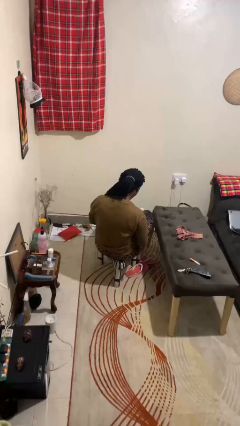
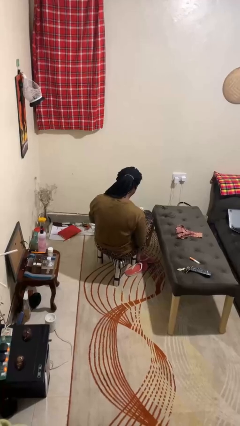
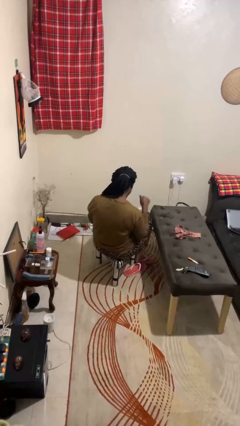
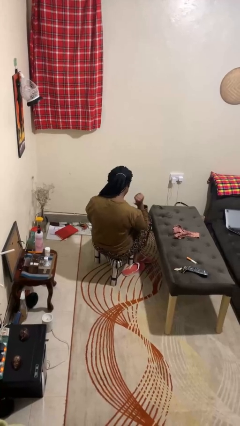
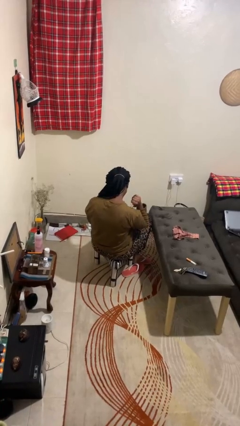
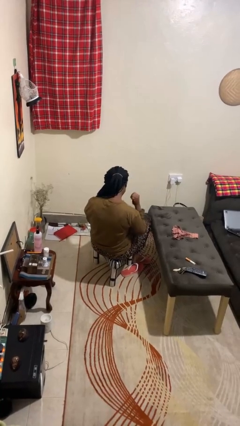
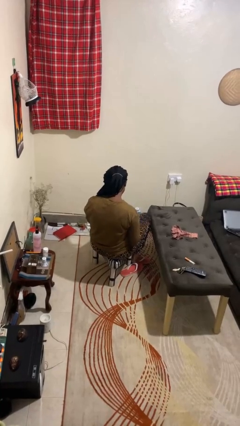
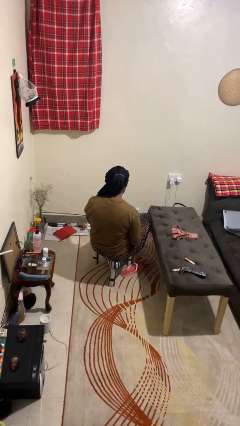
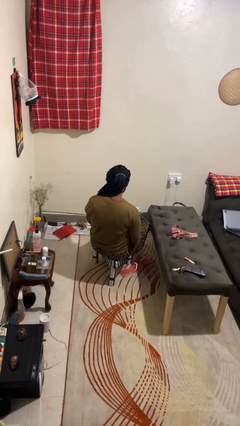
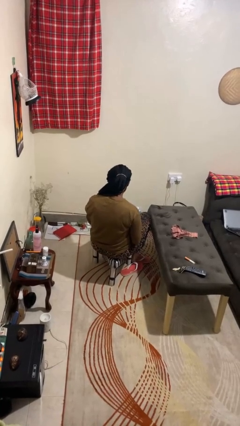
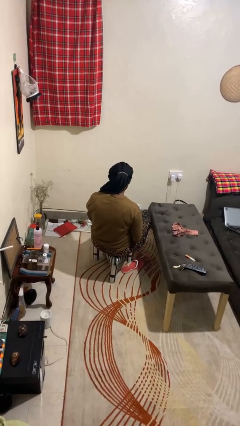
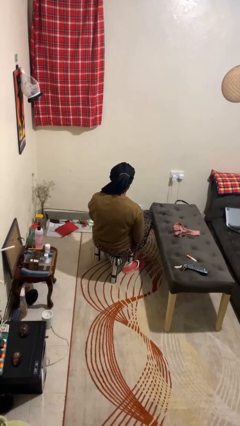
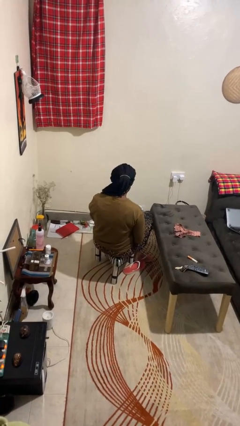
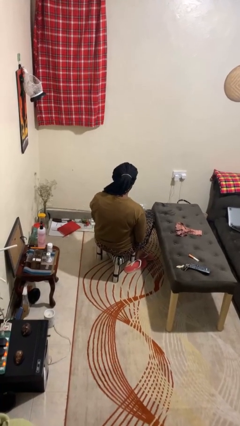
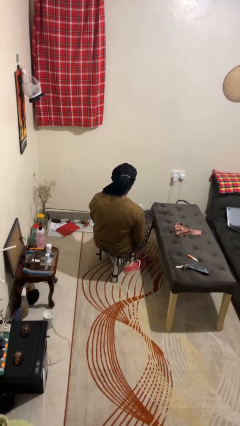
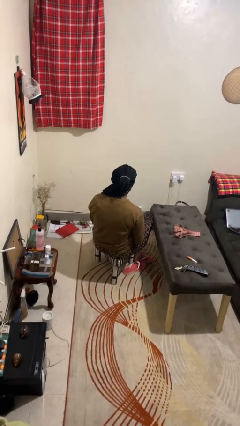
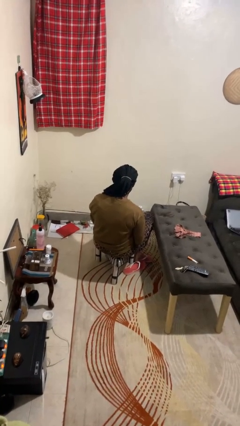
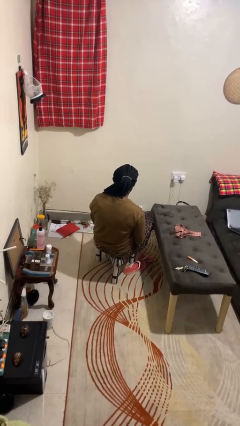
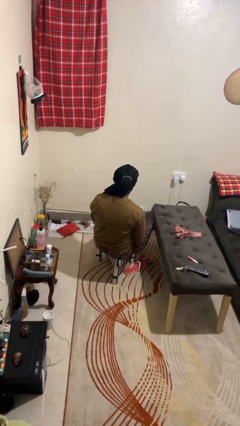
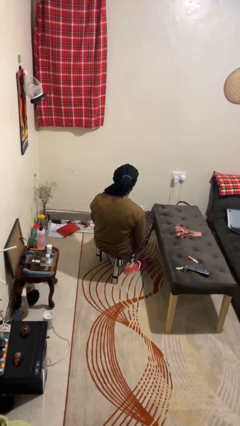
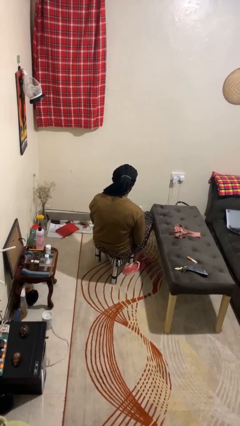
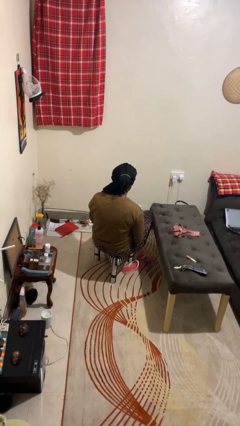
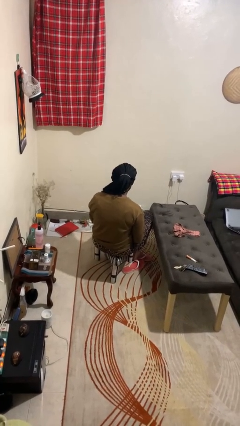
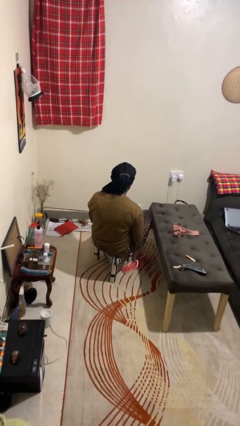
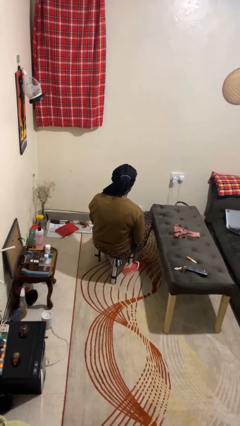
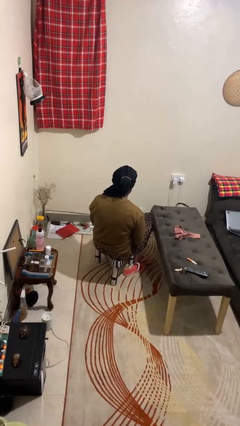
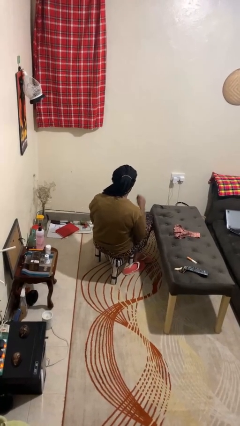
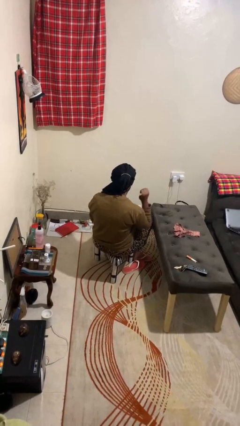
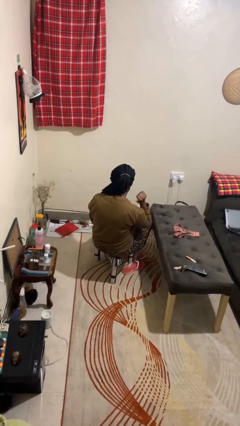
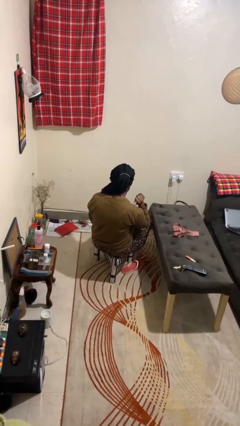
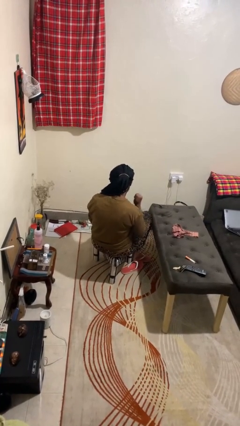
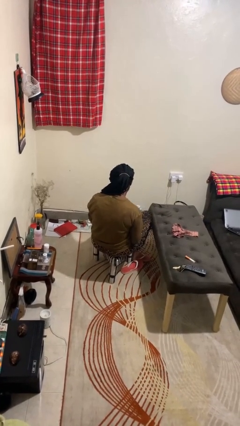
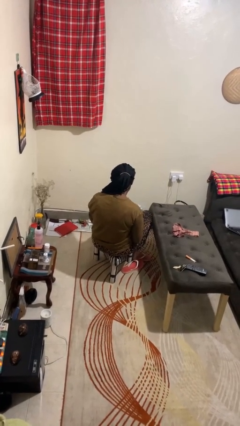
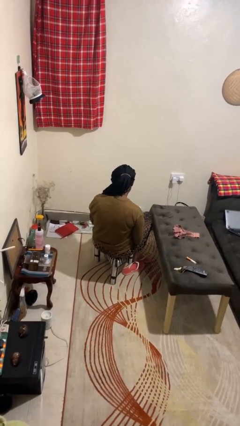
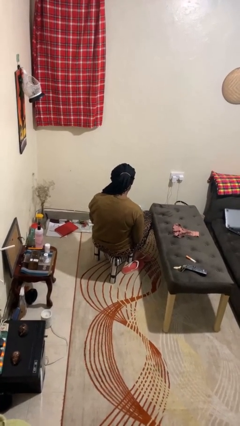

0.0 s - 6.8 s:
person gestures behind me

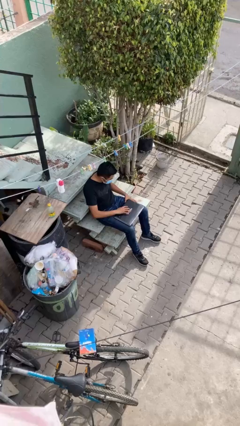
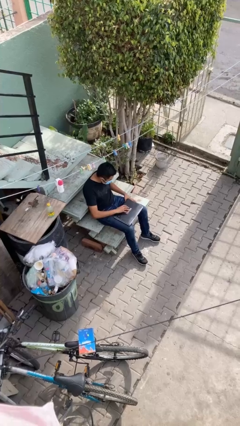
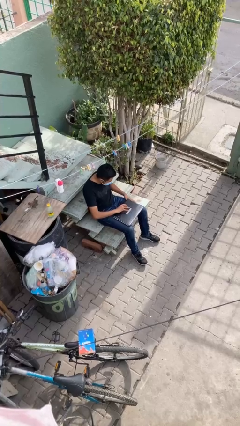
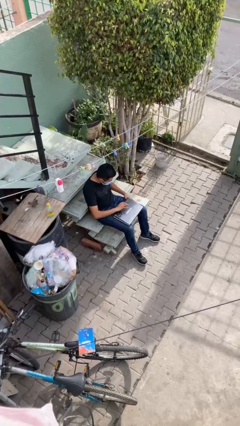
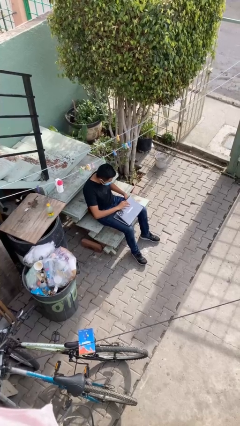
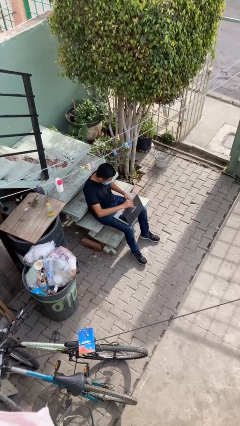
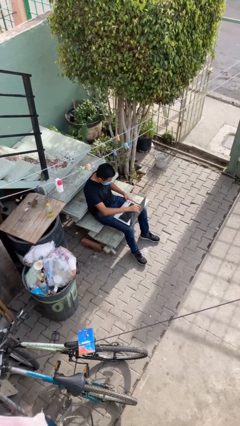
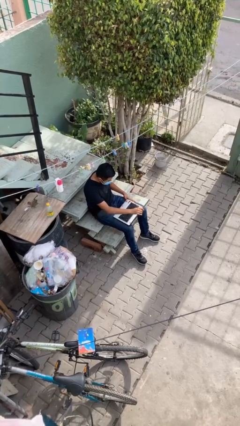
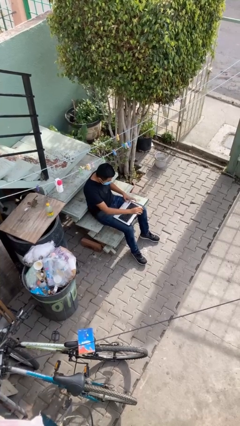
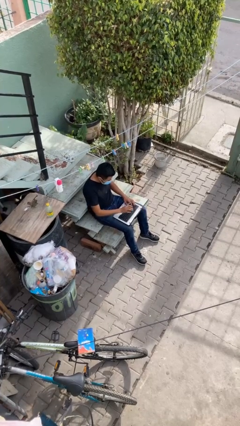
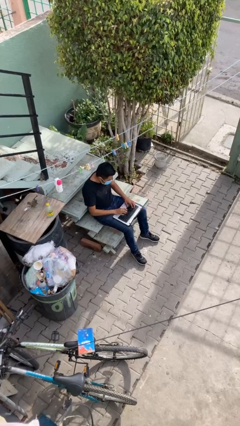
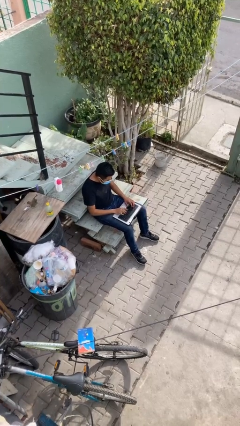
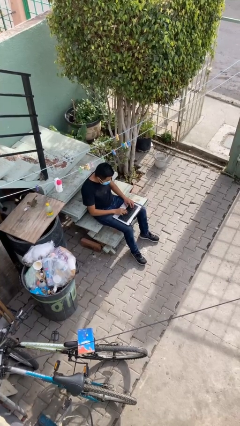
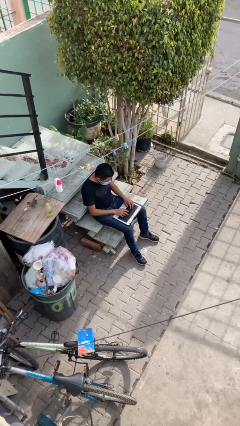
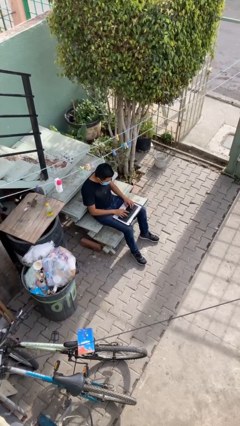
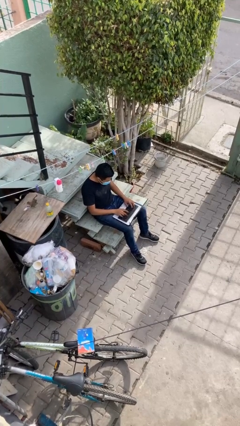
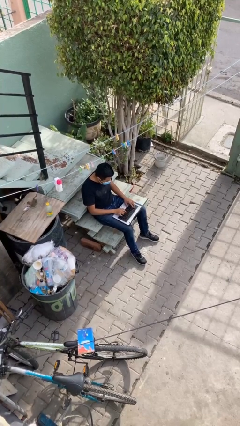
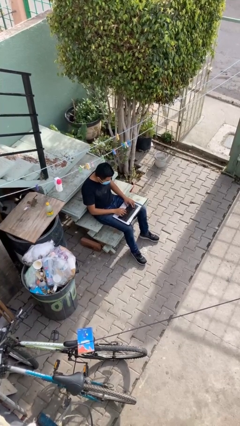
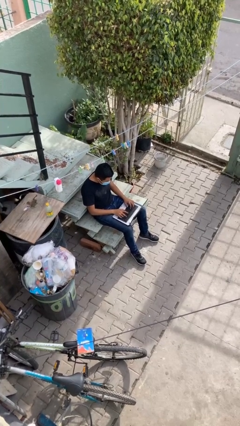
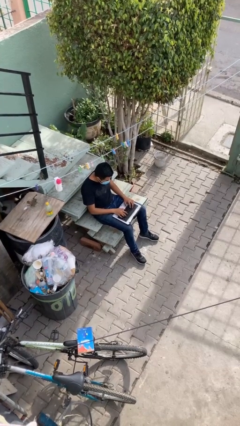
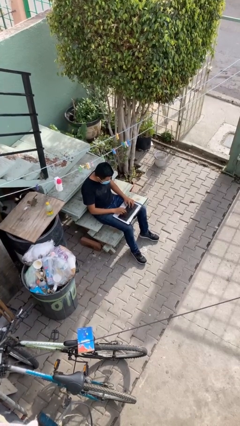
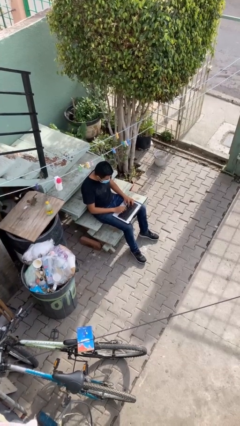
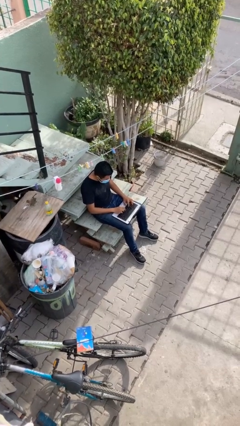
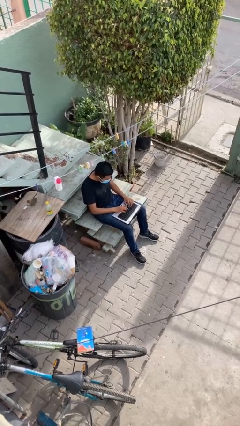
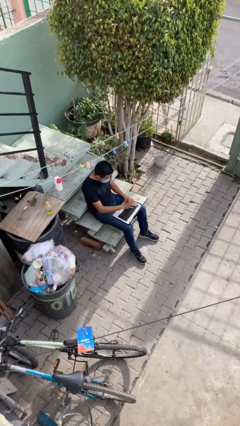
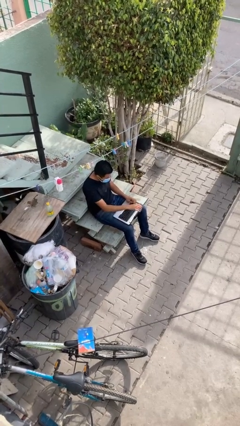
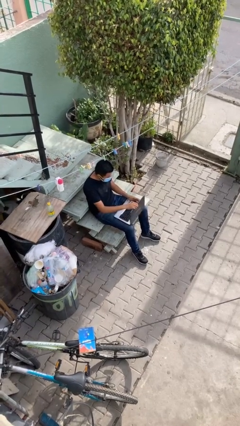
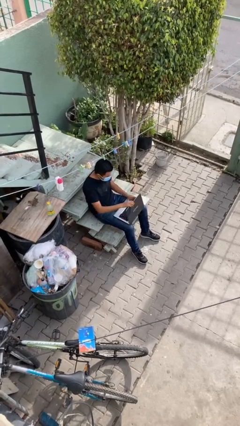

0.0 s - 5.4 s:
person interacts with laptop

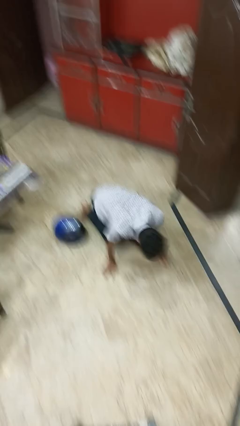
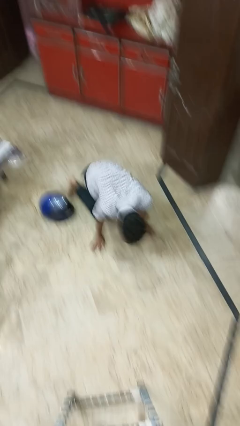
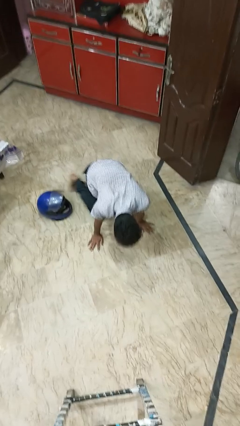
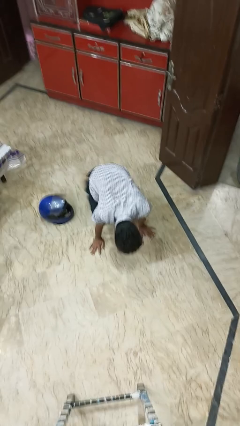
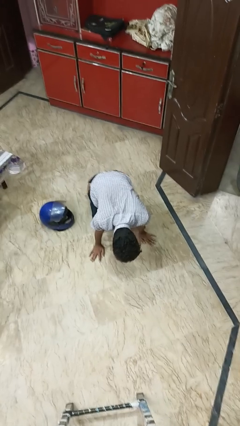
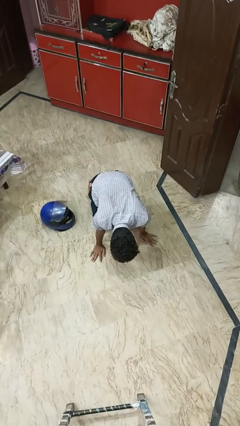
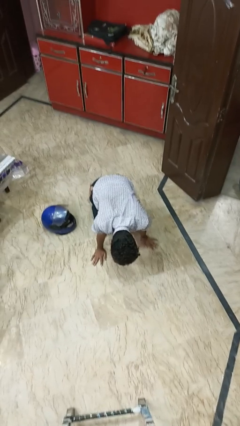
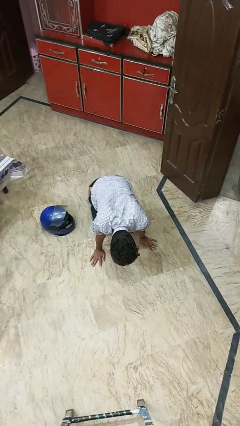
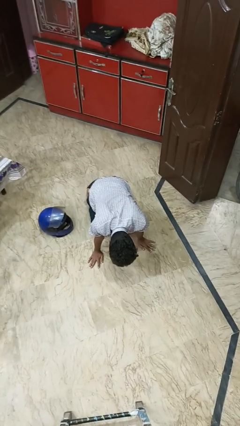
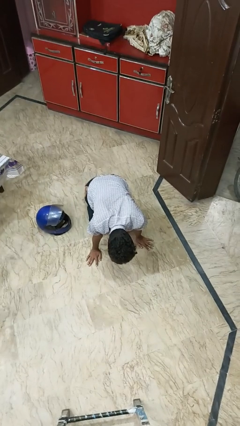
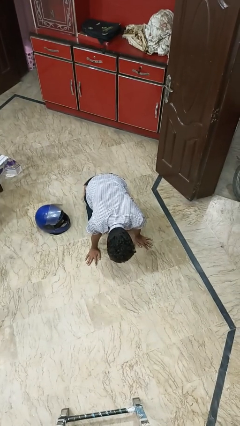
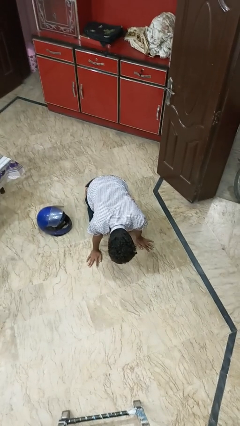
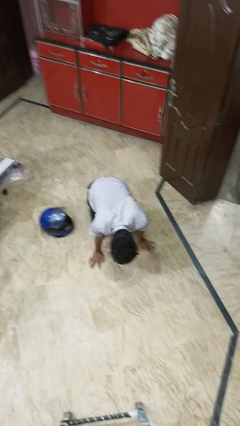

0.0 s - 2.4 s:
person trips on object on floor

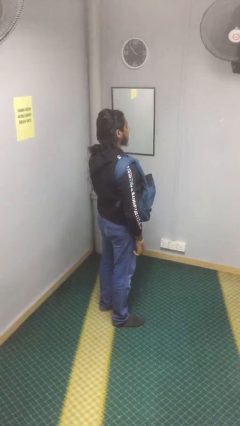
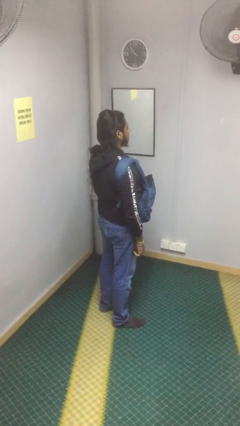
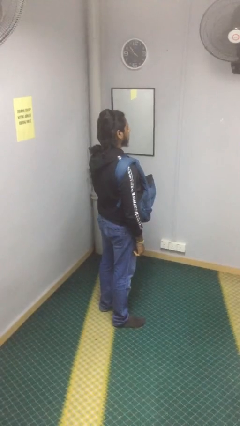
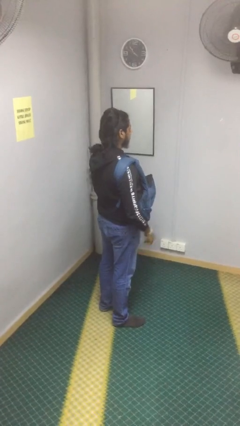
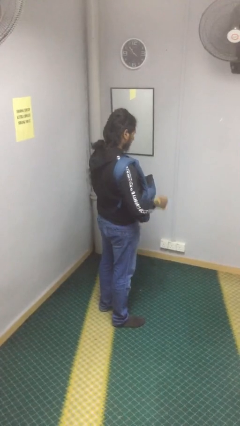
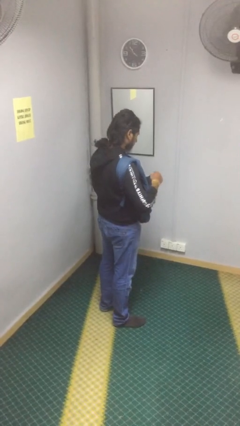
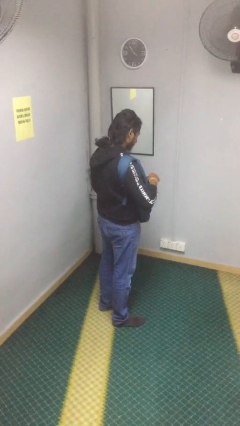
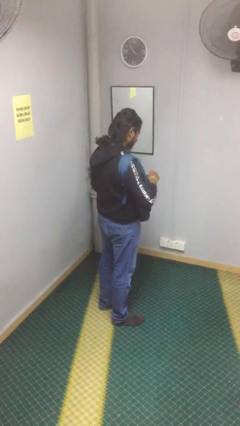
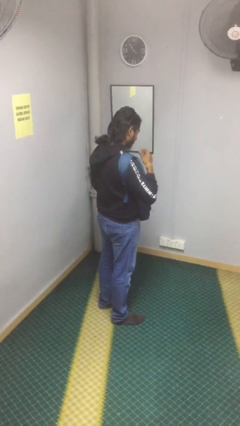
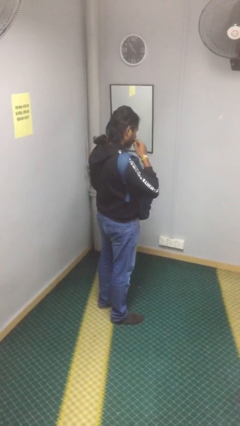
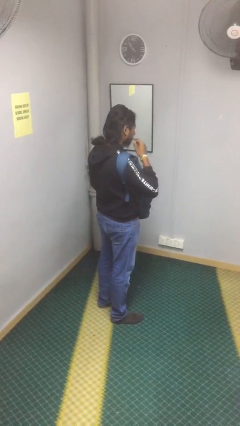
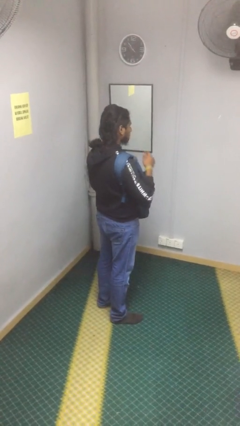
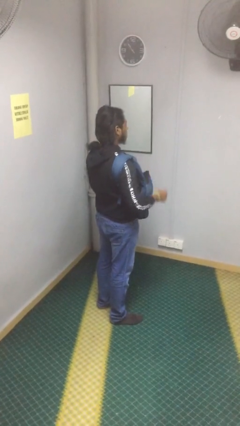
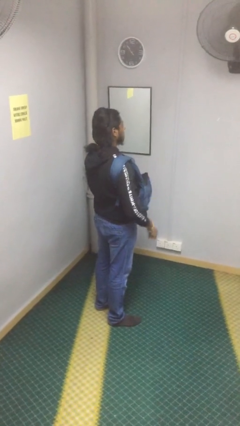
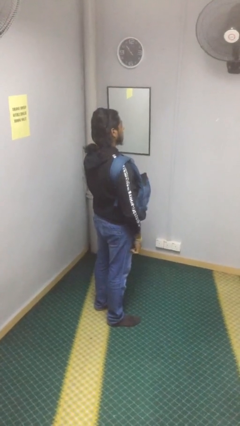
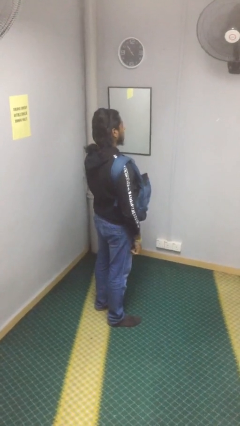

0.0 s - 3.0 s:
person eats snack from bag
